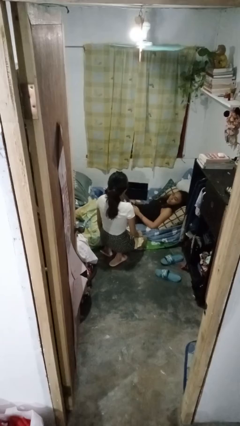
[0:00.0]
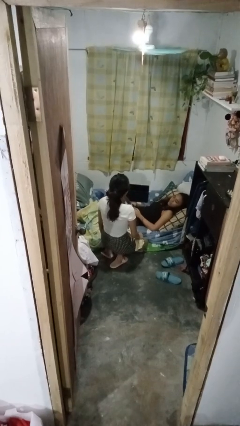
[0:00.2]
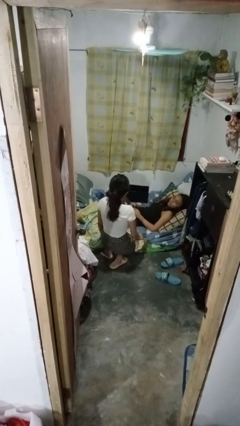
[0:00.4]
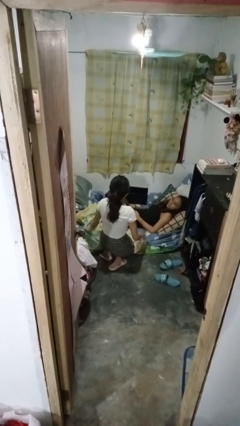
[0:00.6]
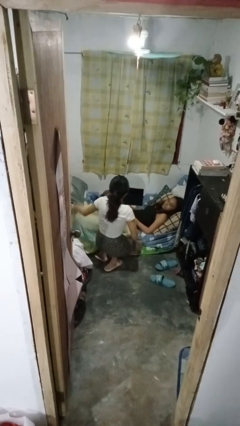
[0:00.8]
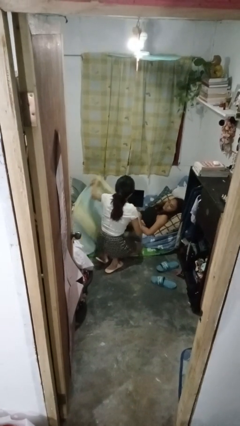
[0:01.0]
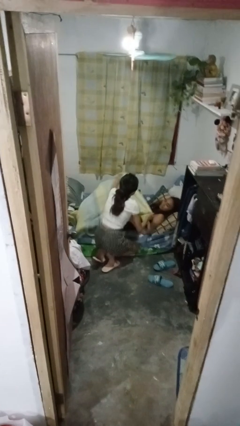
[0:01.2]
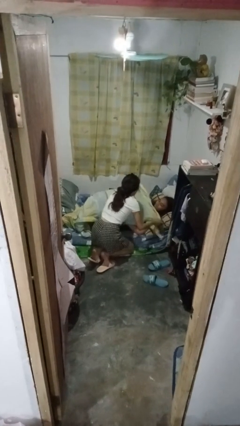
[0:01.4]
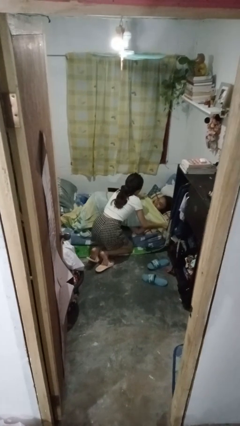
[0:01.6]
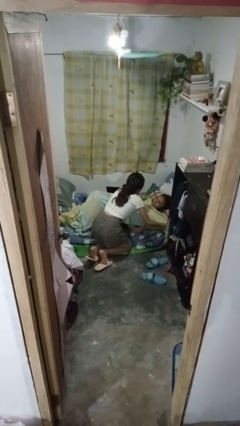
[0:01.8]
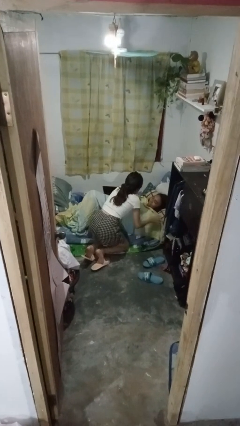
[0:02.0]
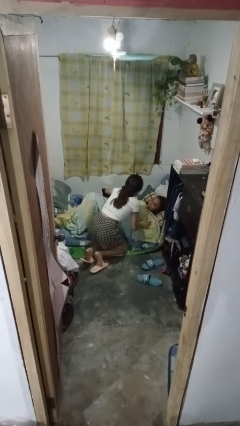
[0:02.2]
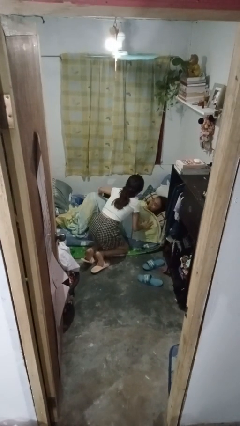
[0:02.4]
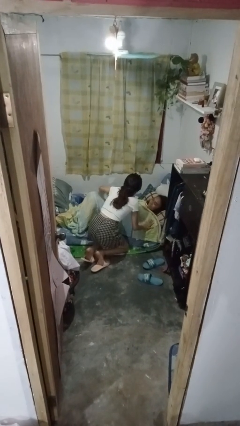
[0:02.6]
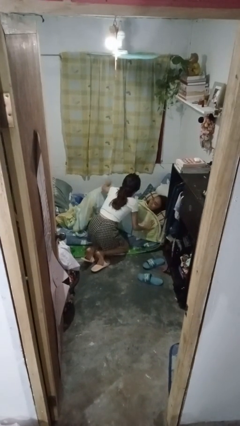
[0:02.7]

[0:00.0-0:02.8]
person covers friend with blanket

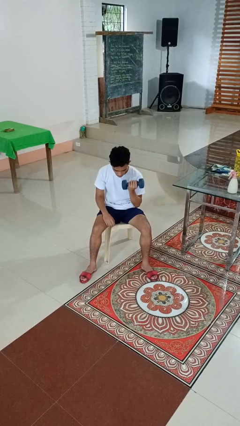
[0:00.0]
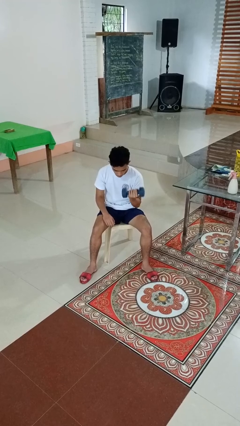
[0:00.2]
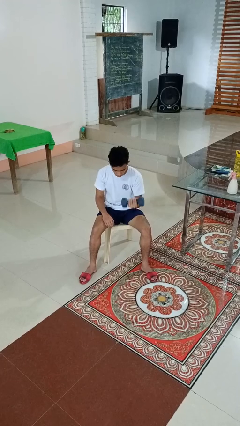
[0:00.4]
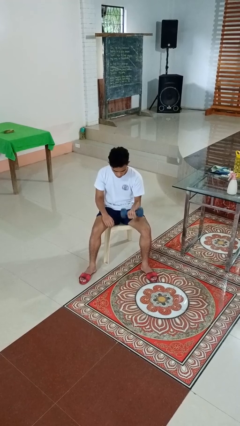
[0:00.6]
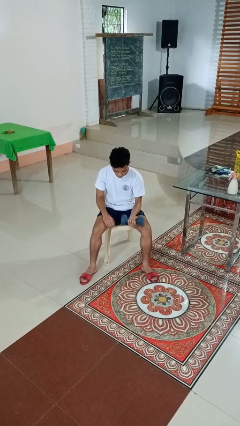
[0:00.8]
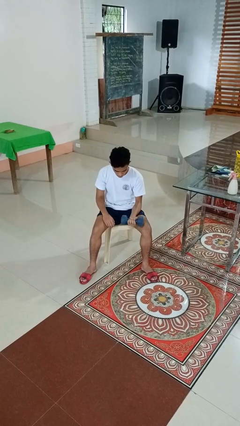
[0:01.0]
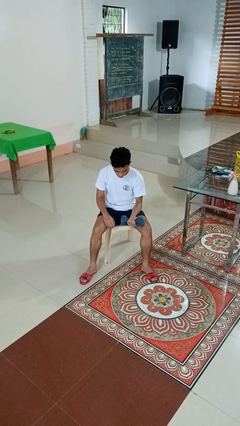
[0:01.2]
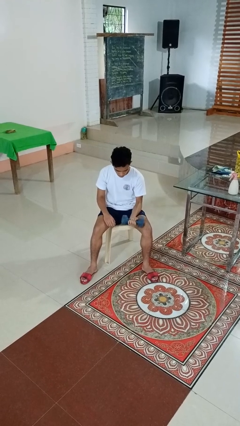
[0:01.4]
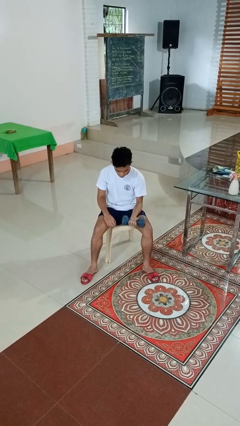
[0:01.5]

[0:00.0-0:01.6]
person lifts dumbbells

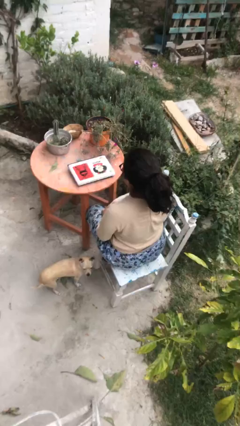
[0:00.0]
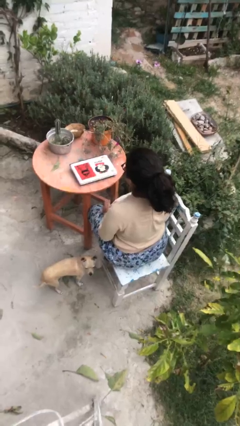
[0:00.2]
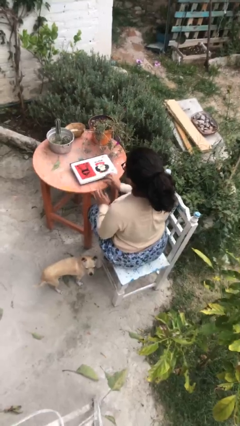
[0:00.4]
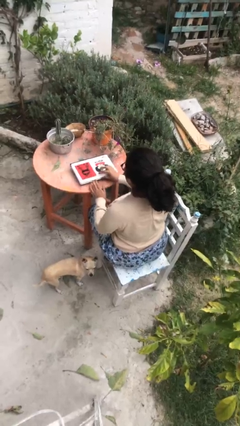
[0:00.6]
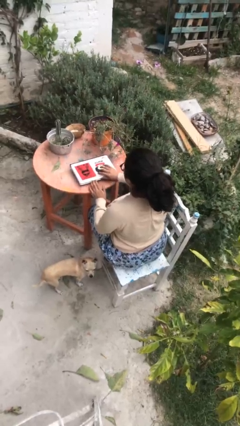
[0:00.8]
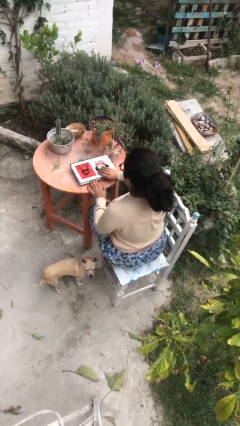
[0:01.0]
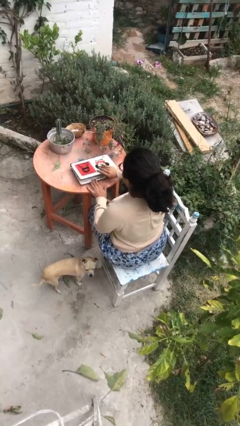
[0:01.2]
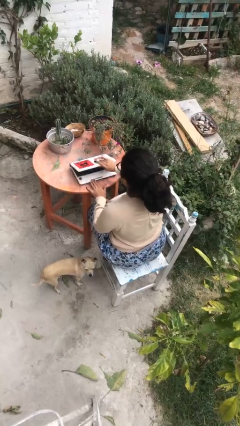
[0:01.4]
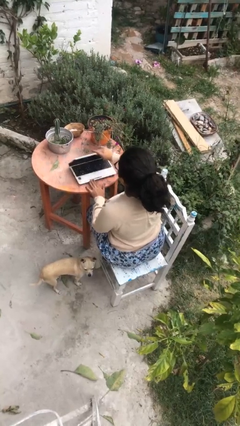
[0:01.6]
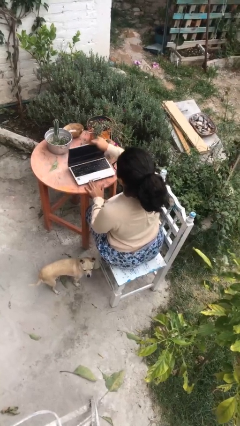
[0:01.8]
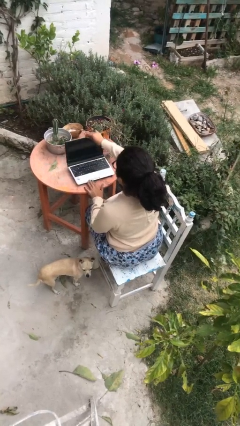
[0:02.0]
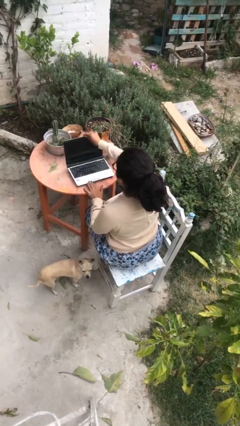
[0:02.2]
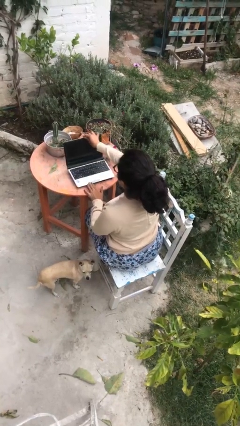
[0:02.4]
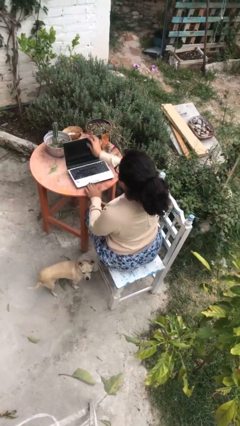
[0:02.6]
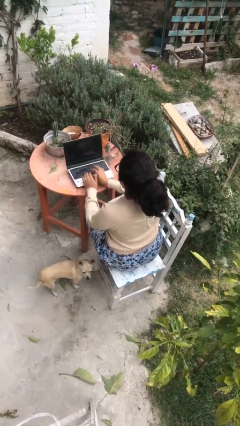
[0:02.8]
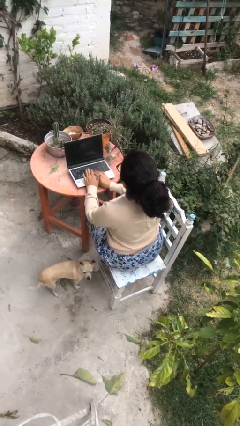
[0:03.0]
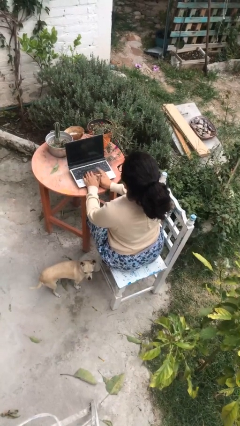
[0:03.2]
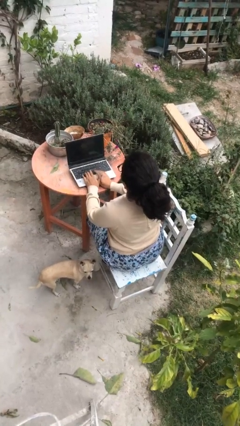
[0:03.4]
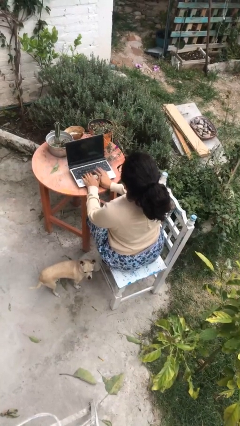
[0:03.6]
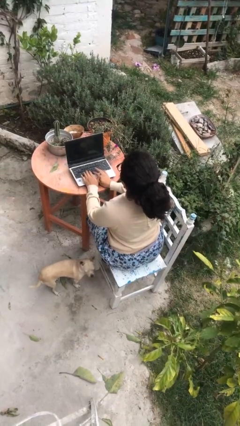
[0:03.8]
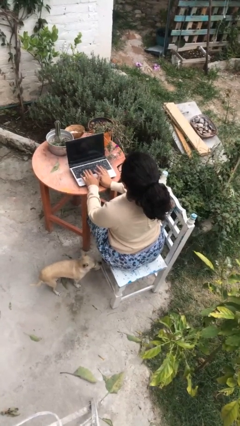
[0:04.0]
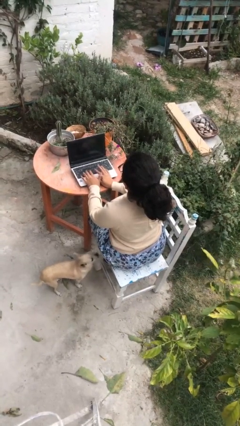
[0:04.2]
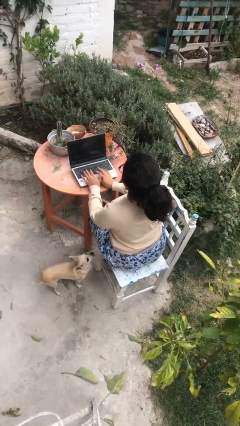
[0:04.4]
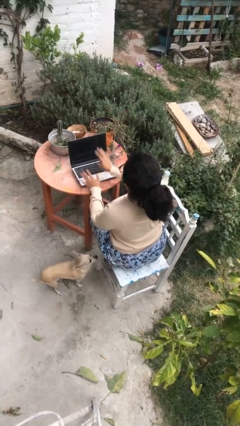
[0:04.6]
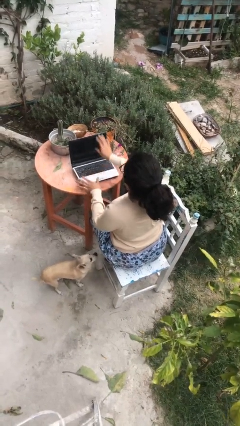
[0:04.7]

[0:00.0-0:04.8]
person opens laptop

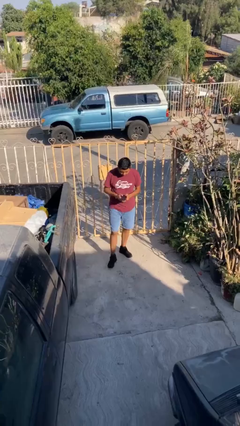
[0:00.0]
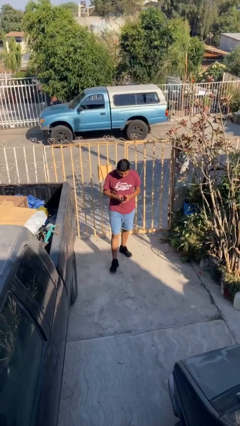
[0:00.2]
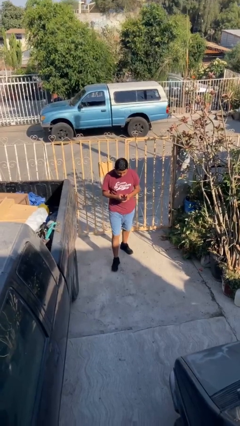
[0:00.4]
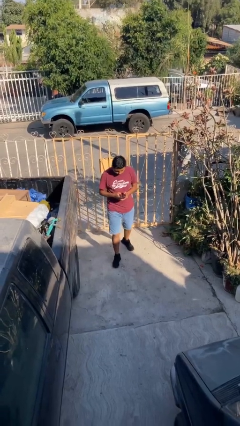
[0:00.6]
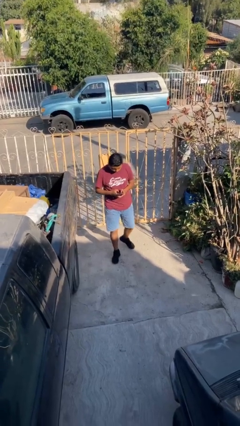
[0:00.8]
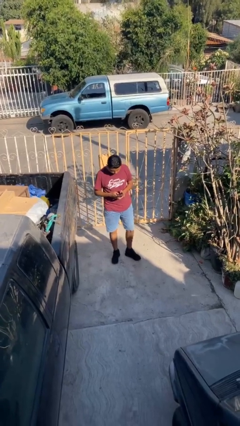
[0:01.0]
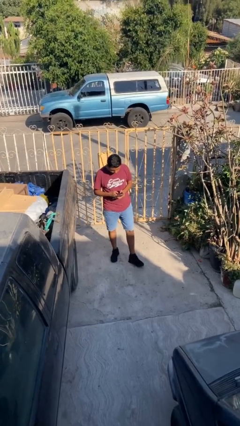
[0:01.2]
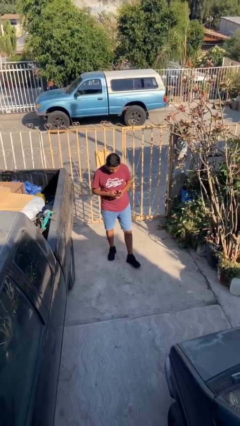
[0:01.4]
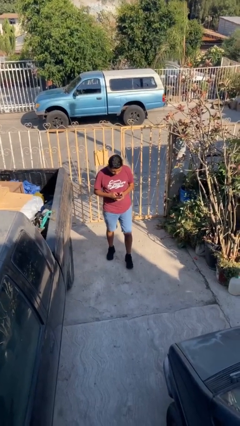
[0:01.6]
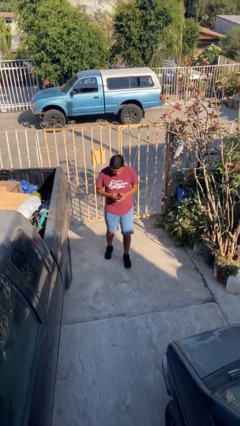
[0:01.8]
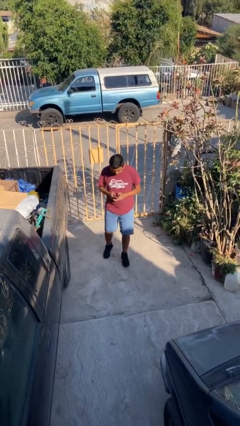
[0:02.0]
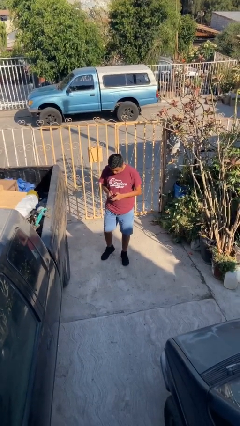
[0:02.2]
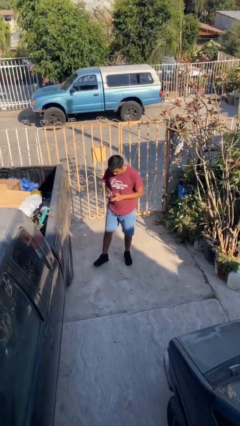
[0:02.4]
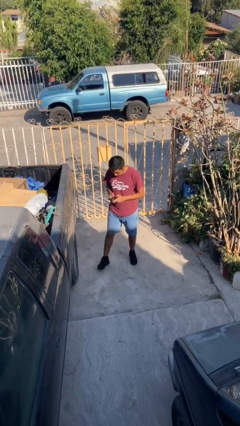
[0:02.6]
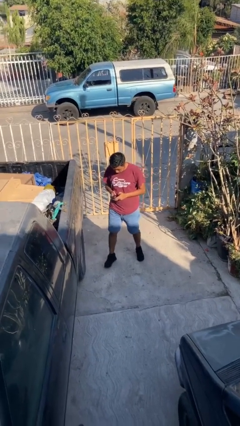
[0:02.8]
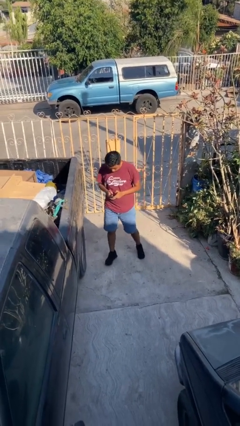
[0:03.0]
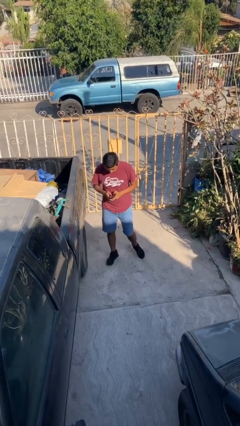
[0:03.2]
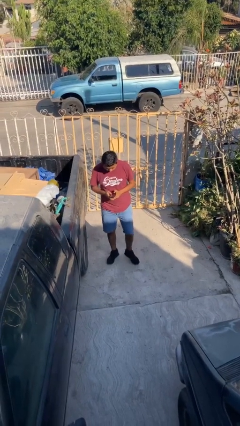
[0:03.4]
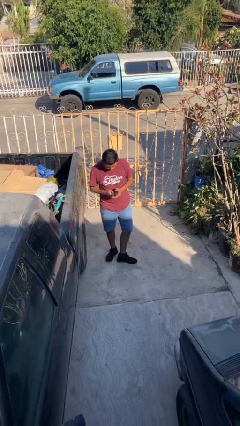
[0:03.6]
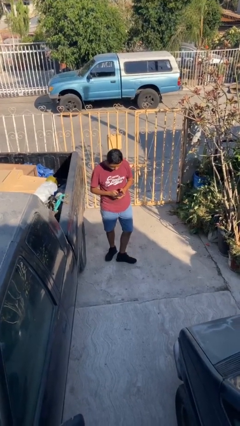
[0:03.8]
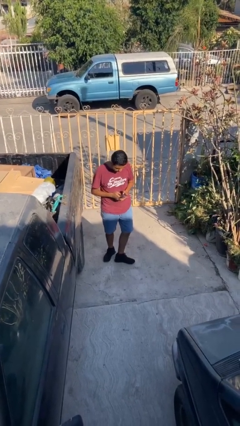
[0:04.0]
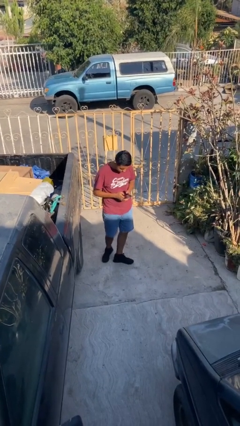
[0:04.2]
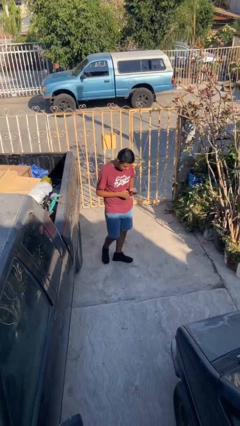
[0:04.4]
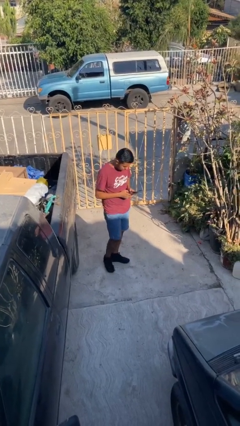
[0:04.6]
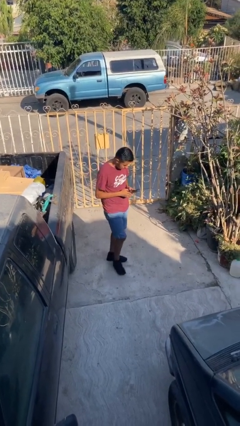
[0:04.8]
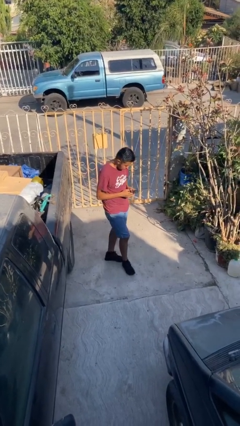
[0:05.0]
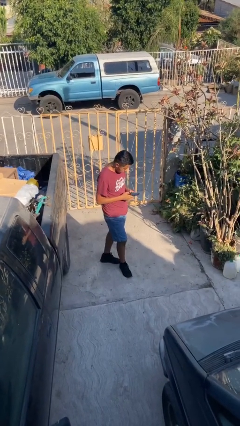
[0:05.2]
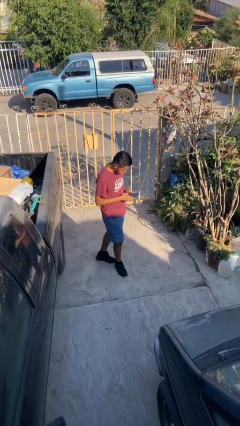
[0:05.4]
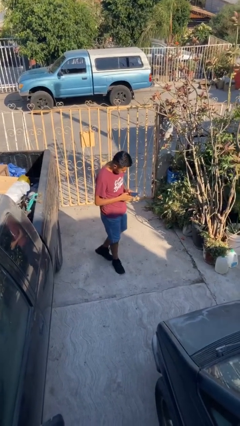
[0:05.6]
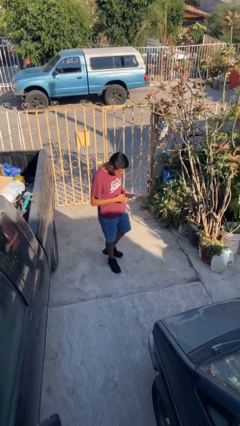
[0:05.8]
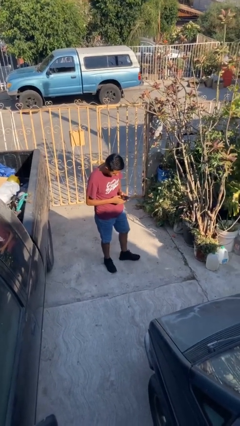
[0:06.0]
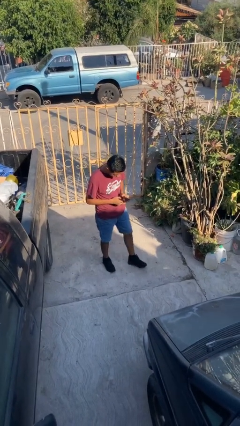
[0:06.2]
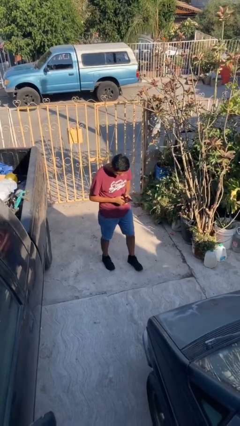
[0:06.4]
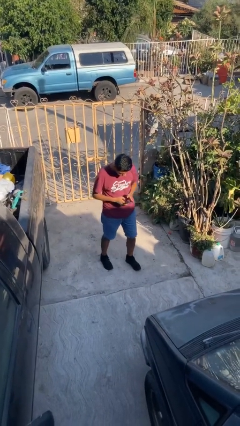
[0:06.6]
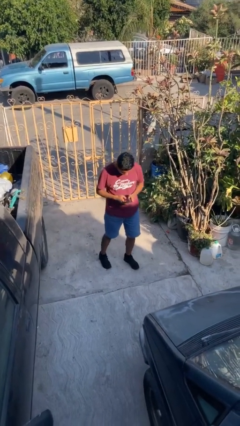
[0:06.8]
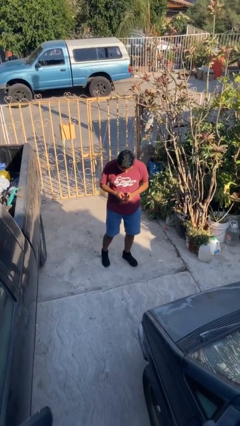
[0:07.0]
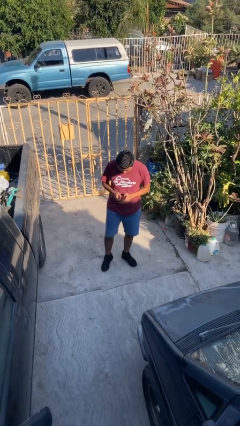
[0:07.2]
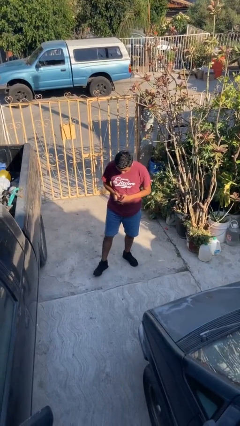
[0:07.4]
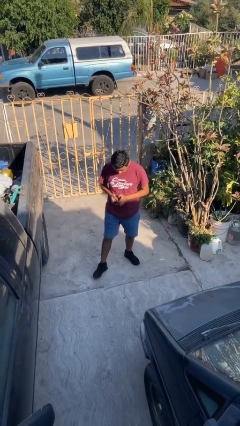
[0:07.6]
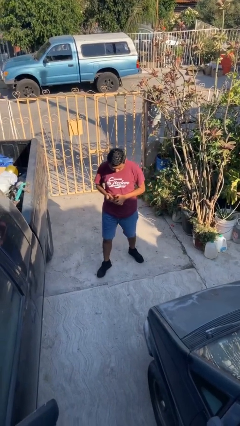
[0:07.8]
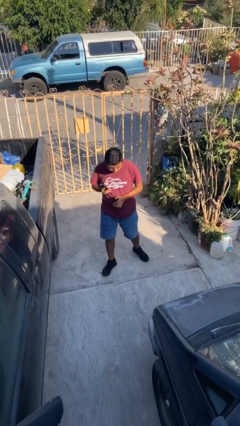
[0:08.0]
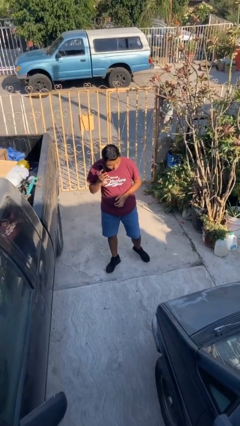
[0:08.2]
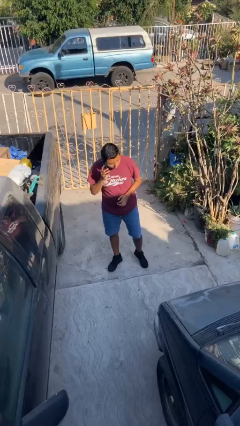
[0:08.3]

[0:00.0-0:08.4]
person texts on phone
